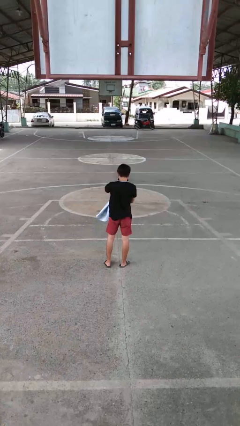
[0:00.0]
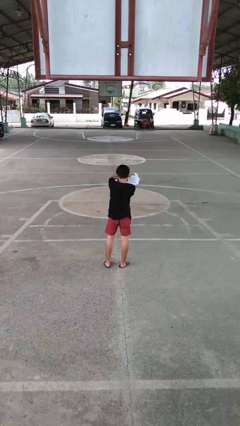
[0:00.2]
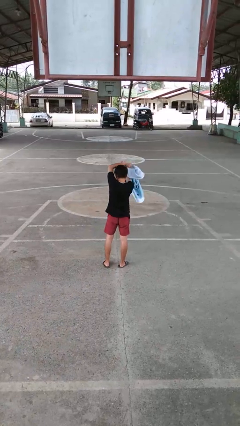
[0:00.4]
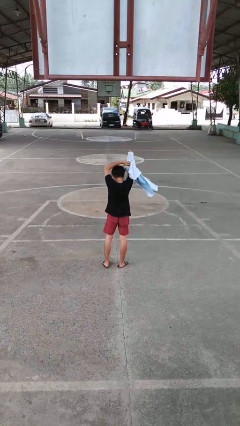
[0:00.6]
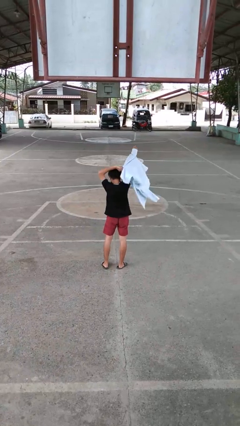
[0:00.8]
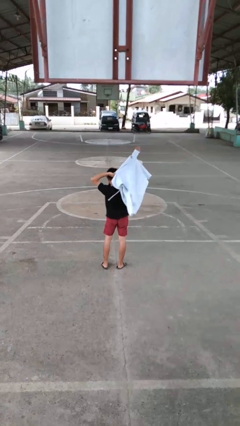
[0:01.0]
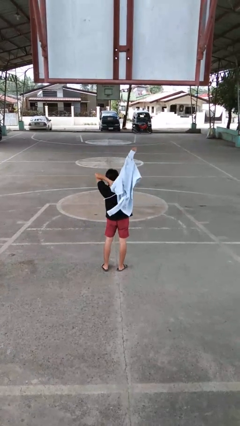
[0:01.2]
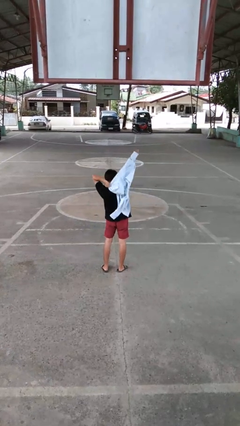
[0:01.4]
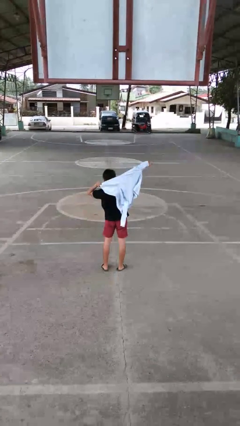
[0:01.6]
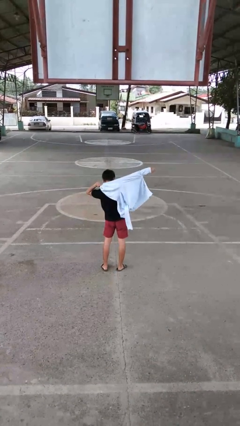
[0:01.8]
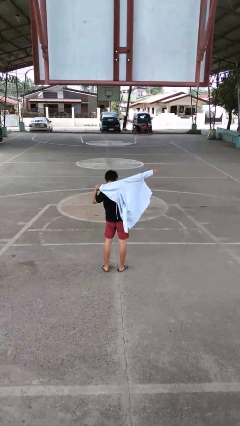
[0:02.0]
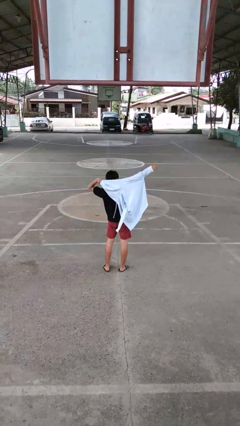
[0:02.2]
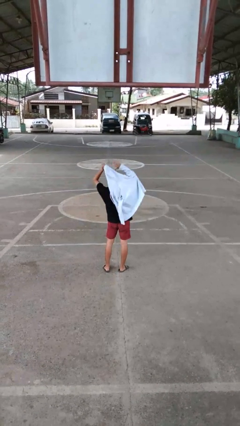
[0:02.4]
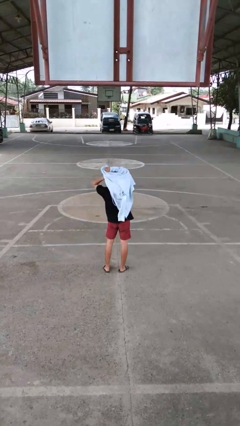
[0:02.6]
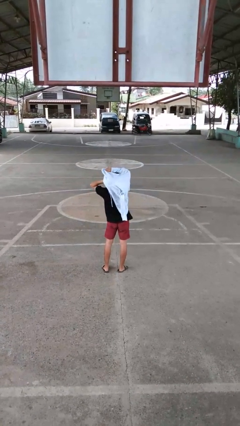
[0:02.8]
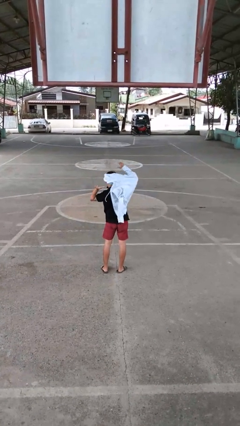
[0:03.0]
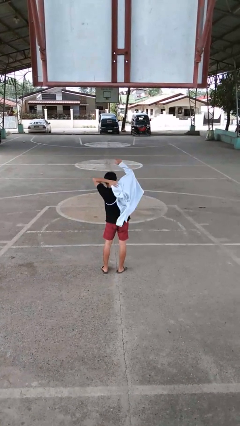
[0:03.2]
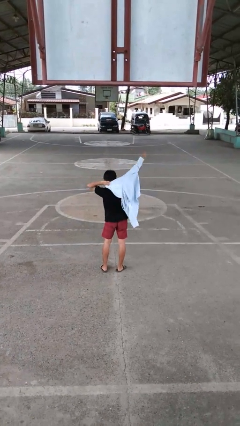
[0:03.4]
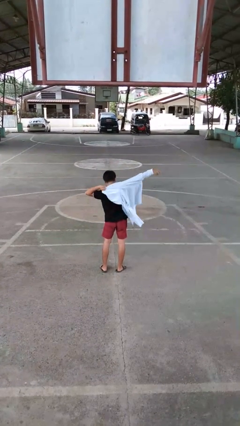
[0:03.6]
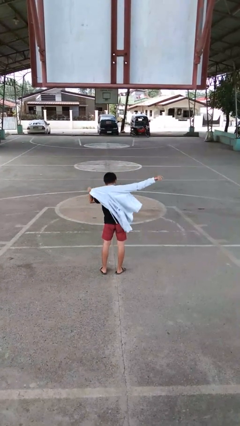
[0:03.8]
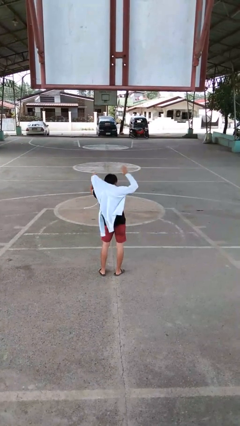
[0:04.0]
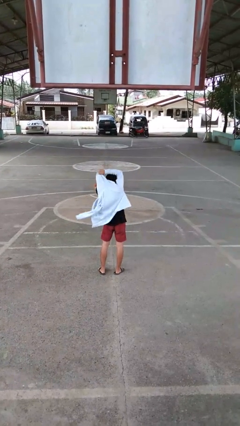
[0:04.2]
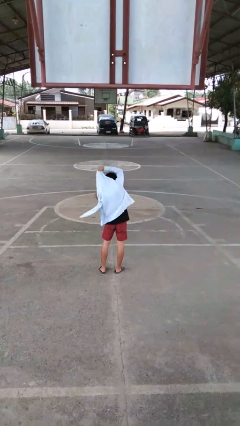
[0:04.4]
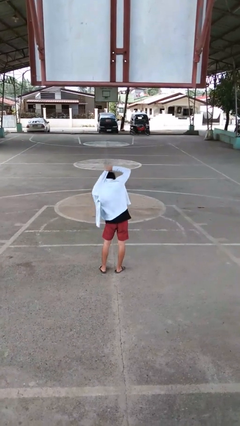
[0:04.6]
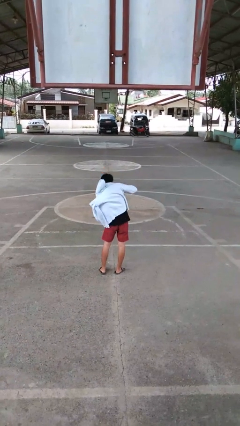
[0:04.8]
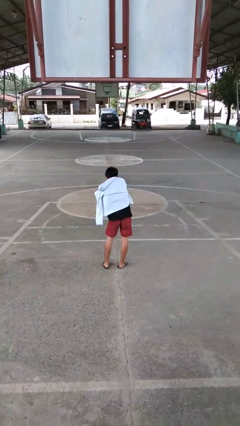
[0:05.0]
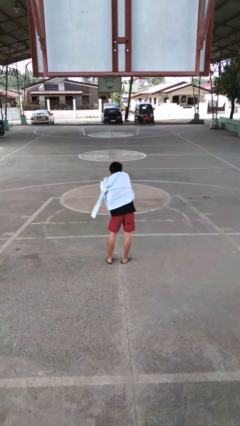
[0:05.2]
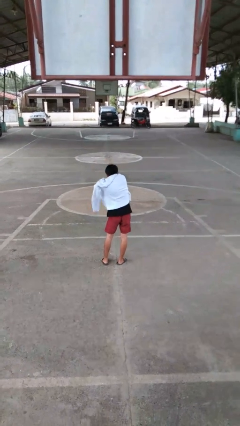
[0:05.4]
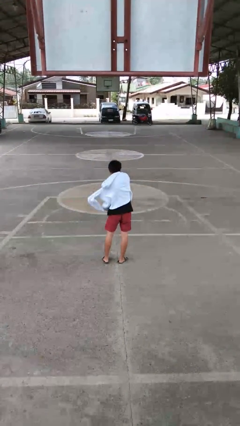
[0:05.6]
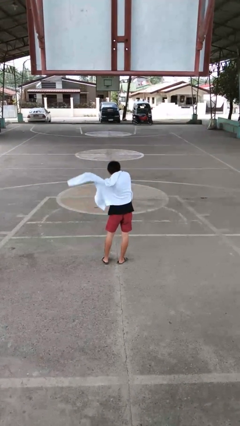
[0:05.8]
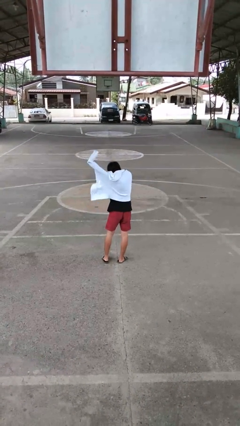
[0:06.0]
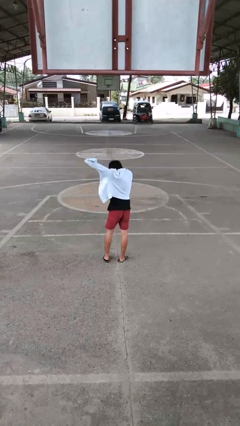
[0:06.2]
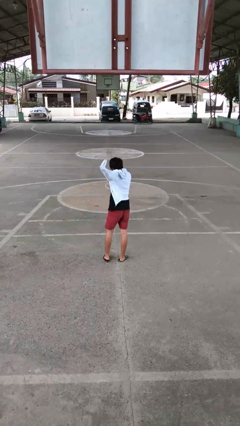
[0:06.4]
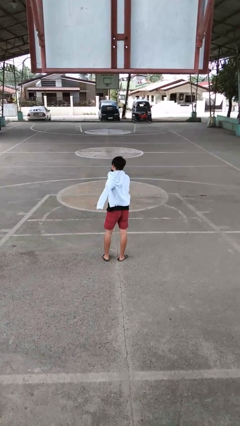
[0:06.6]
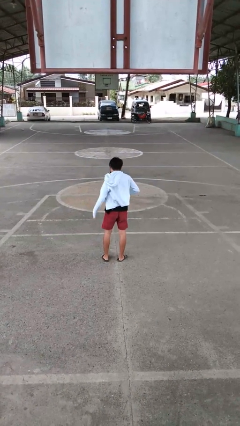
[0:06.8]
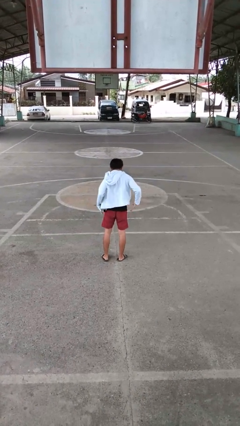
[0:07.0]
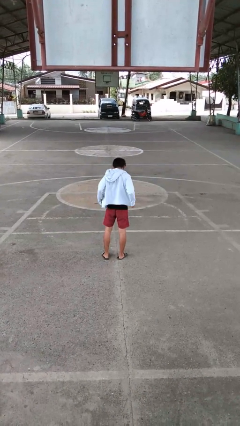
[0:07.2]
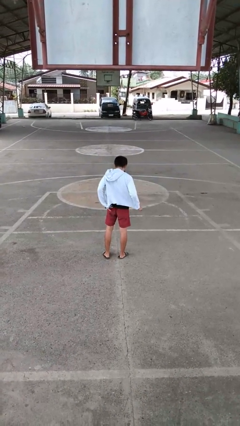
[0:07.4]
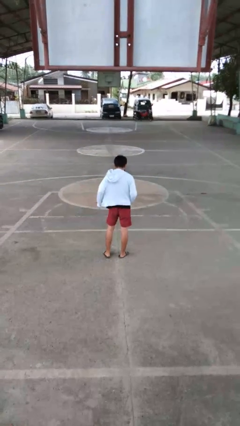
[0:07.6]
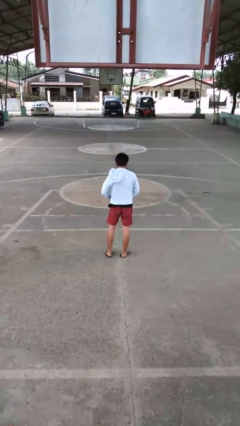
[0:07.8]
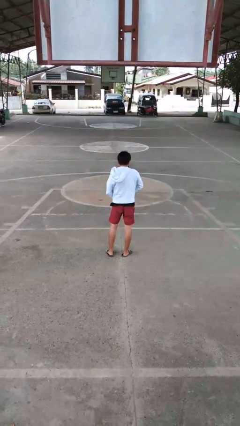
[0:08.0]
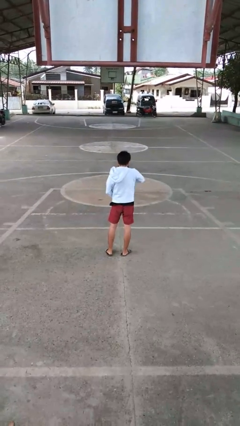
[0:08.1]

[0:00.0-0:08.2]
person puts on jacket

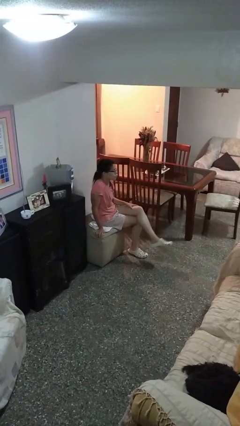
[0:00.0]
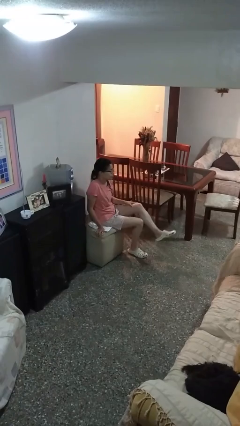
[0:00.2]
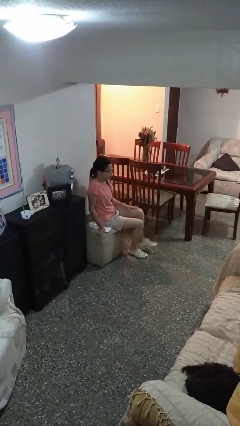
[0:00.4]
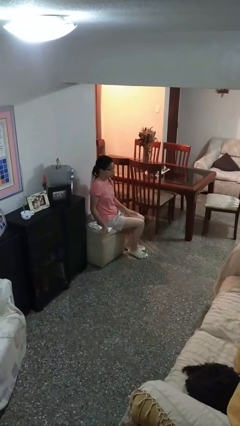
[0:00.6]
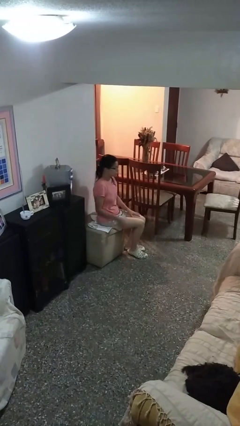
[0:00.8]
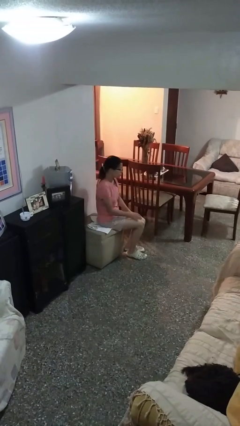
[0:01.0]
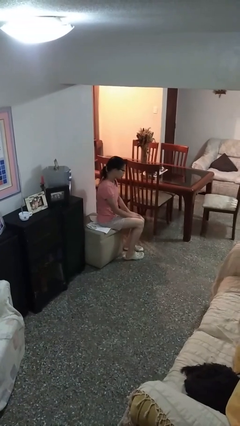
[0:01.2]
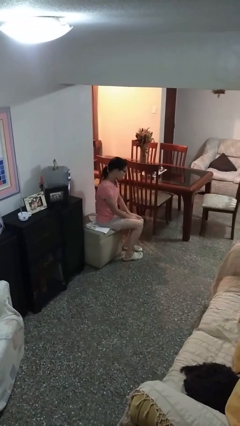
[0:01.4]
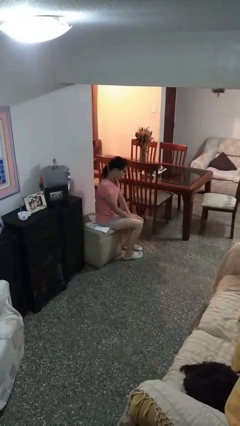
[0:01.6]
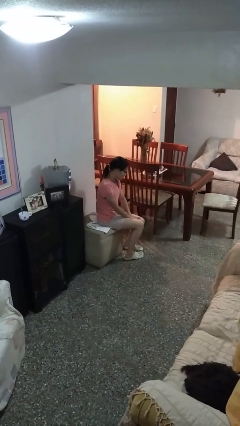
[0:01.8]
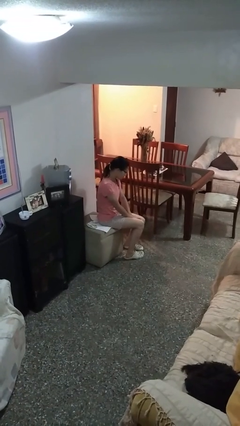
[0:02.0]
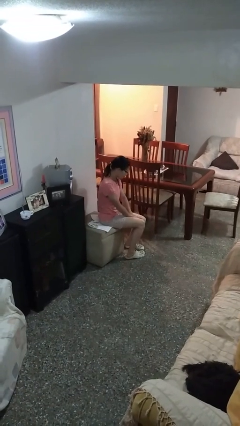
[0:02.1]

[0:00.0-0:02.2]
person strokes chin

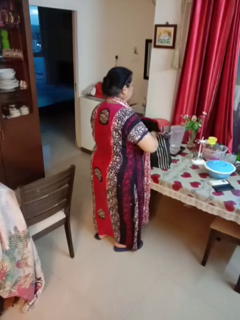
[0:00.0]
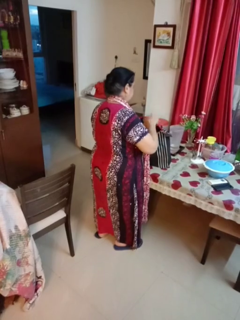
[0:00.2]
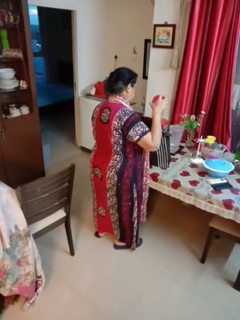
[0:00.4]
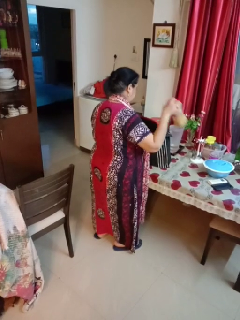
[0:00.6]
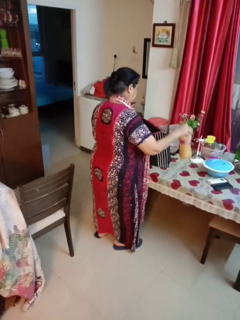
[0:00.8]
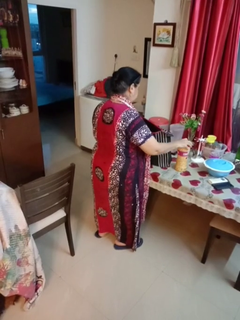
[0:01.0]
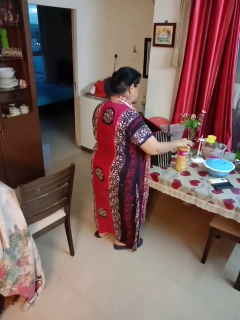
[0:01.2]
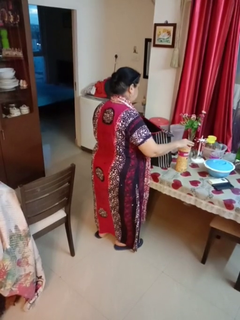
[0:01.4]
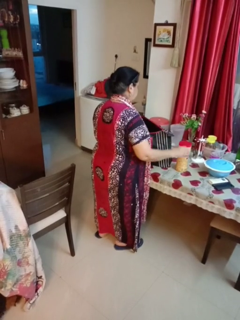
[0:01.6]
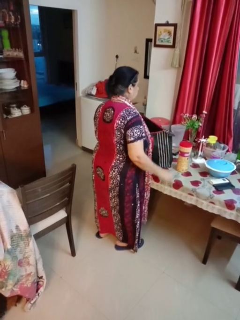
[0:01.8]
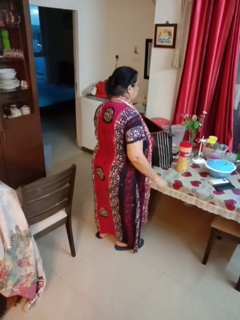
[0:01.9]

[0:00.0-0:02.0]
person takes object from bag

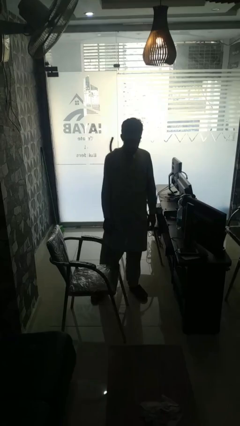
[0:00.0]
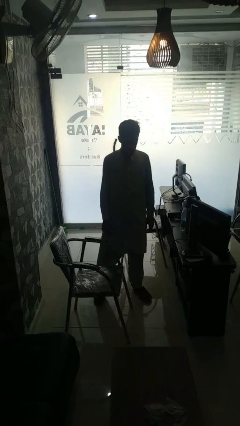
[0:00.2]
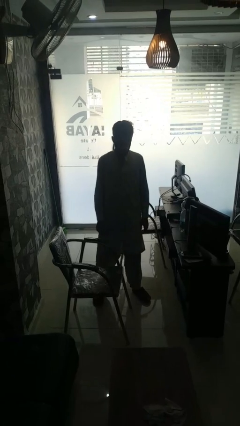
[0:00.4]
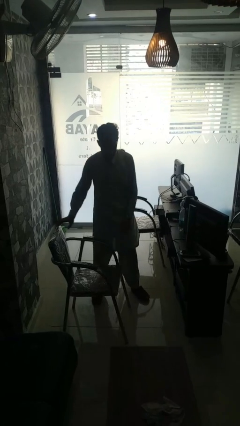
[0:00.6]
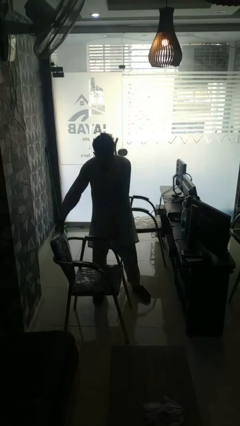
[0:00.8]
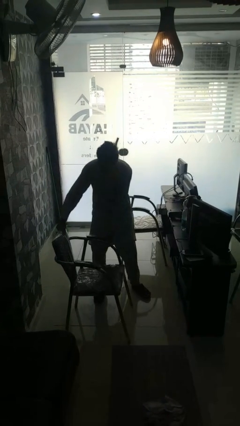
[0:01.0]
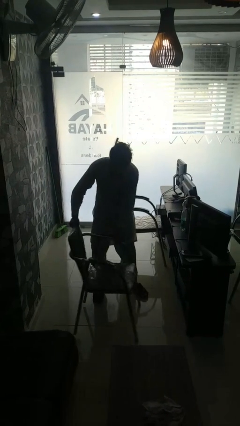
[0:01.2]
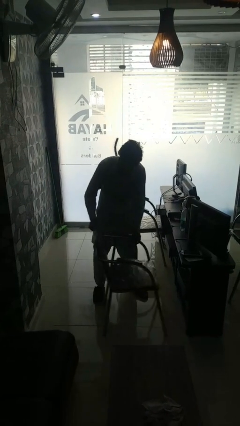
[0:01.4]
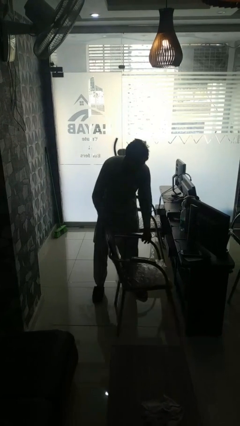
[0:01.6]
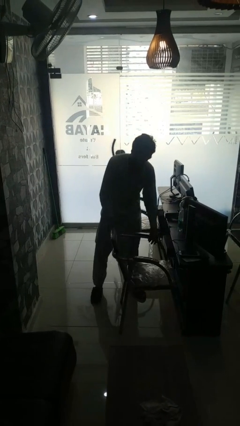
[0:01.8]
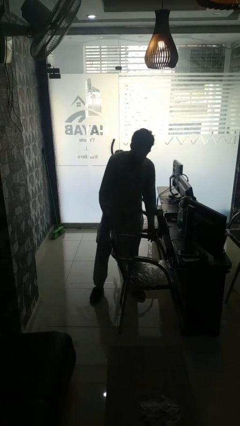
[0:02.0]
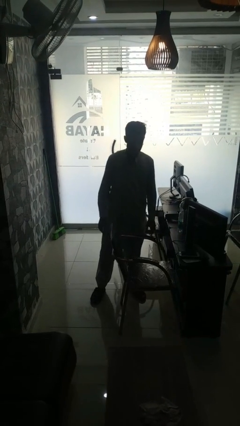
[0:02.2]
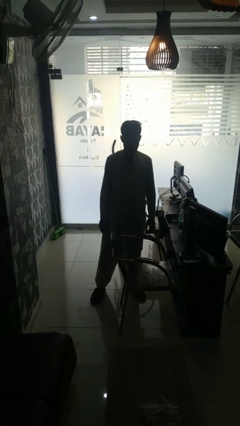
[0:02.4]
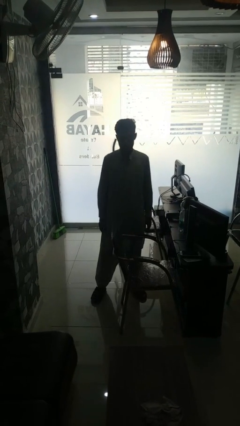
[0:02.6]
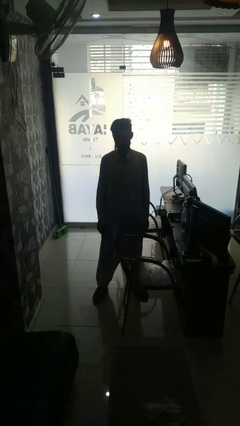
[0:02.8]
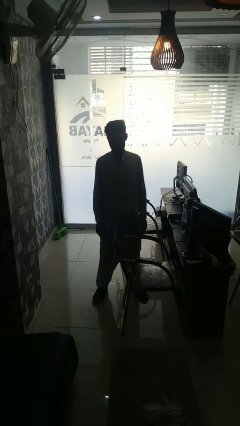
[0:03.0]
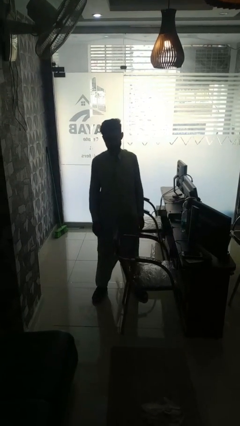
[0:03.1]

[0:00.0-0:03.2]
person pushes in chair

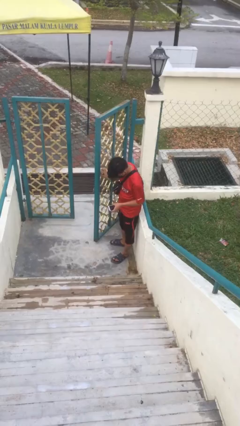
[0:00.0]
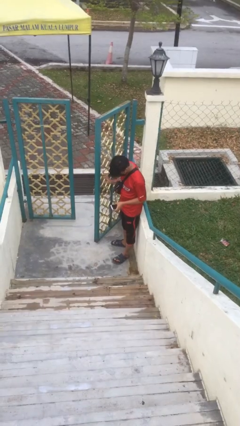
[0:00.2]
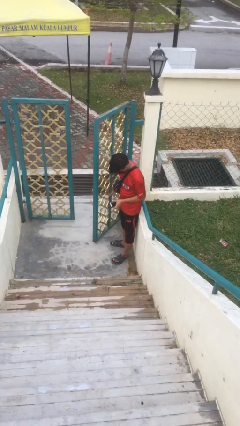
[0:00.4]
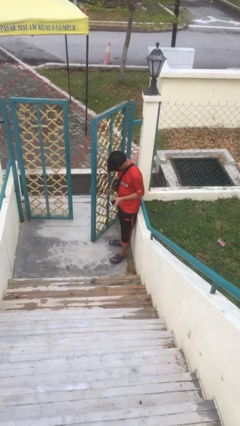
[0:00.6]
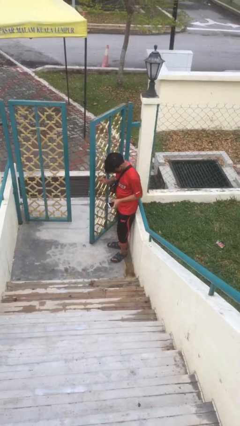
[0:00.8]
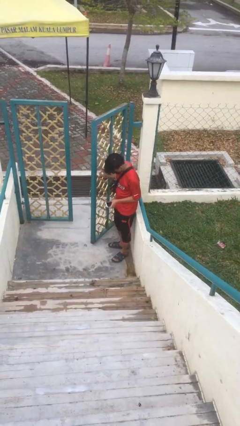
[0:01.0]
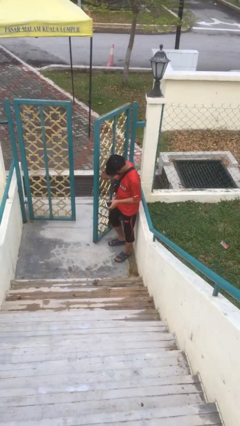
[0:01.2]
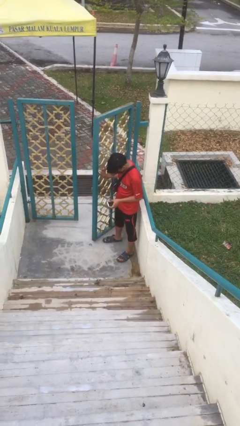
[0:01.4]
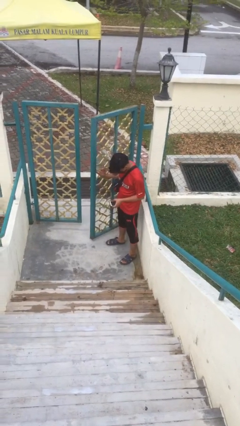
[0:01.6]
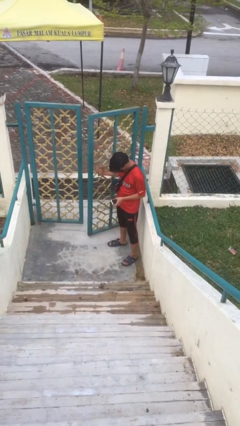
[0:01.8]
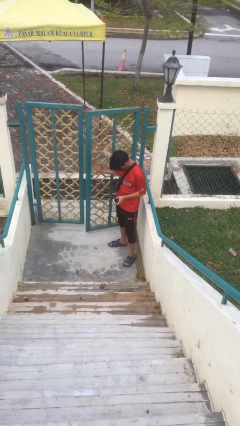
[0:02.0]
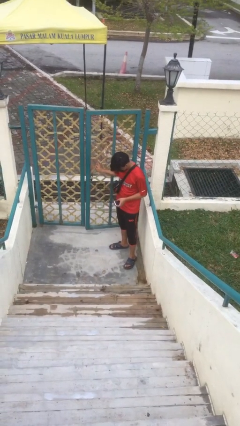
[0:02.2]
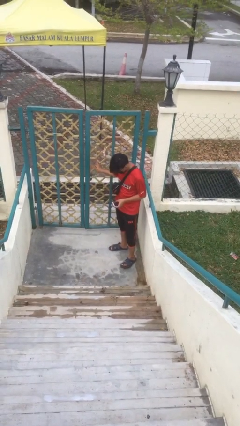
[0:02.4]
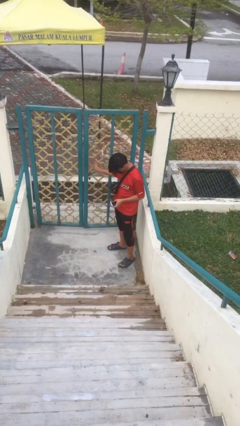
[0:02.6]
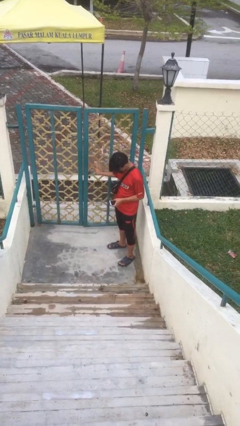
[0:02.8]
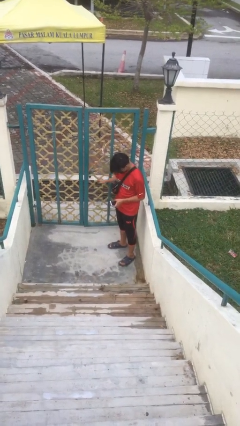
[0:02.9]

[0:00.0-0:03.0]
person closes facility door
